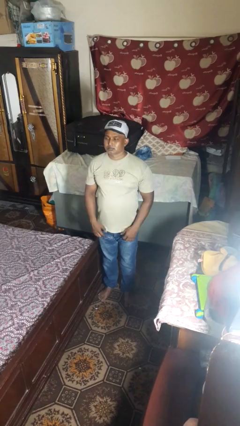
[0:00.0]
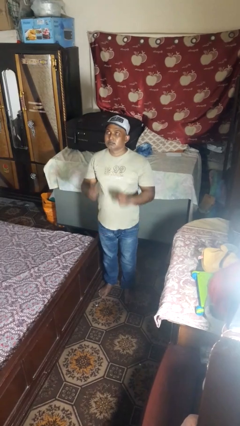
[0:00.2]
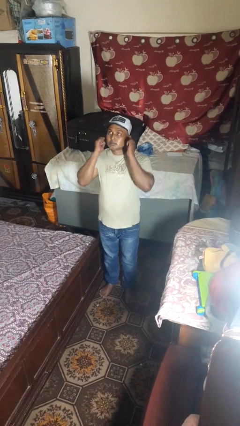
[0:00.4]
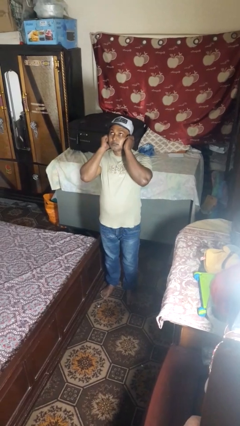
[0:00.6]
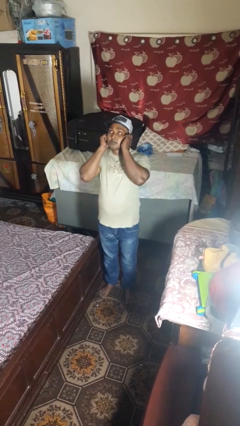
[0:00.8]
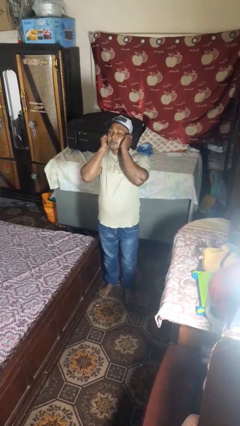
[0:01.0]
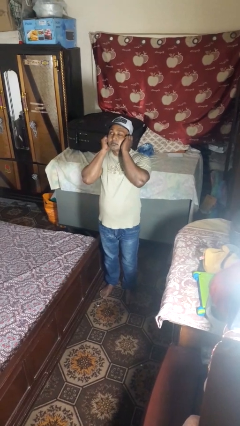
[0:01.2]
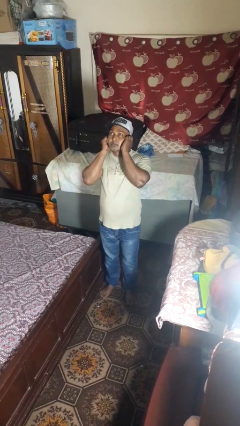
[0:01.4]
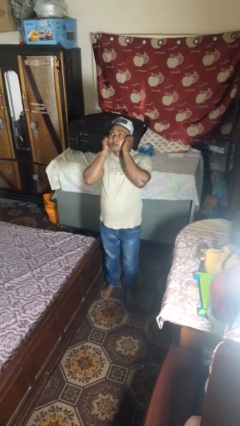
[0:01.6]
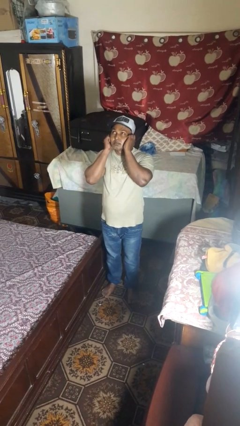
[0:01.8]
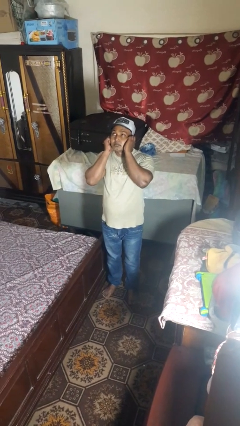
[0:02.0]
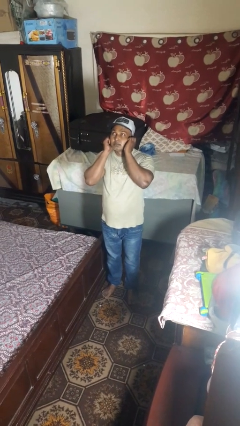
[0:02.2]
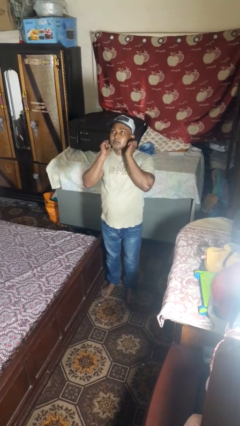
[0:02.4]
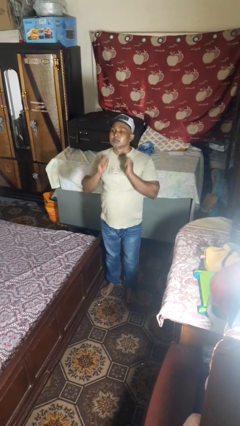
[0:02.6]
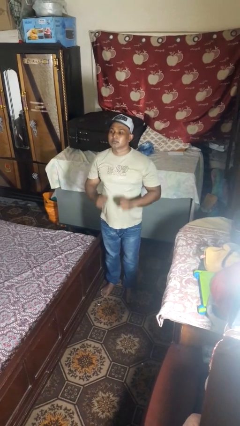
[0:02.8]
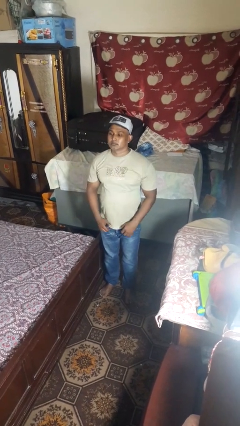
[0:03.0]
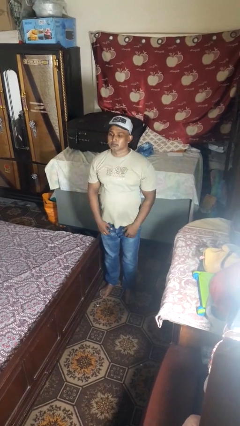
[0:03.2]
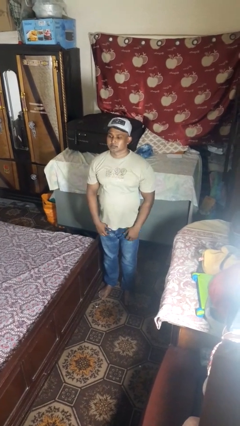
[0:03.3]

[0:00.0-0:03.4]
person puts fingers in ear

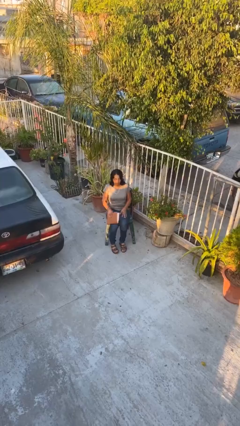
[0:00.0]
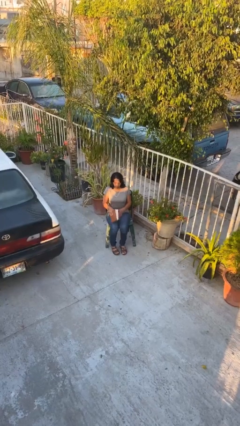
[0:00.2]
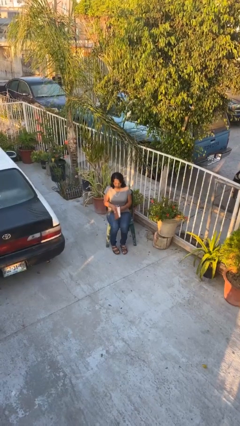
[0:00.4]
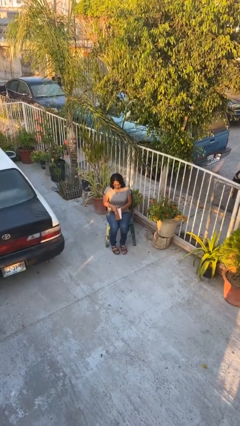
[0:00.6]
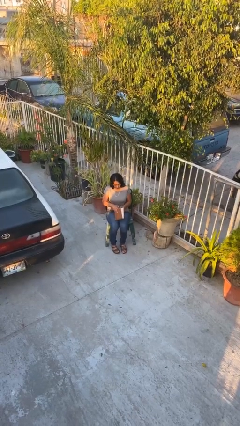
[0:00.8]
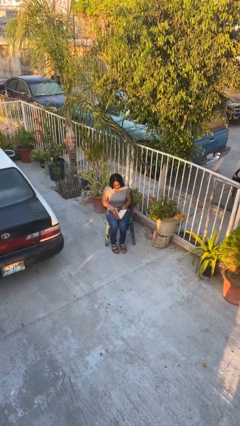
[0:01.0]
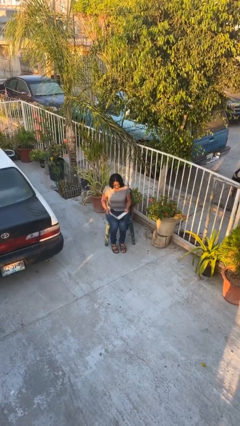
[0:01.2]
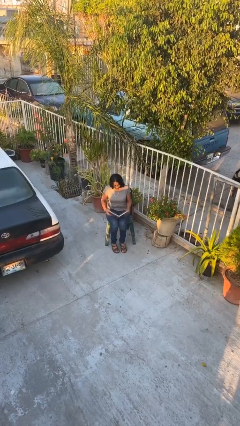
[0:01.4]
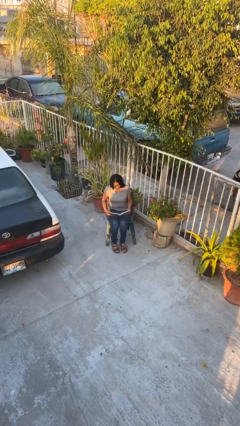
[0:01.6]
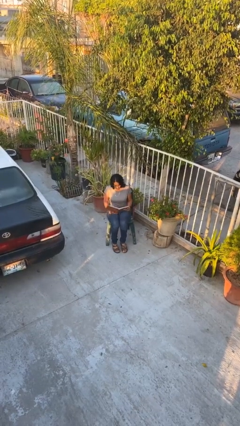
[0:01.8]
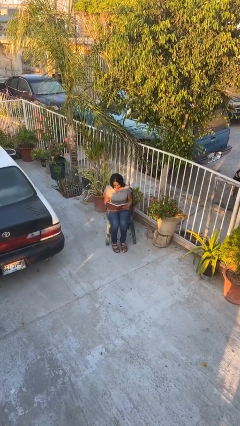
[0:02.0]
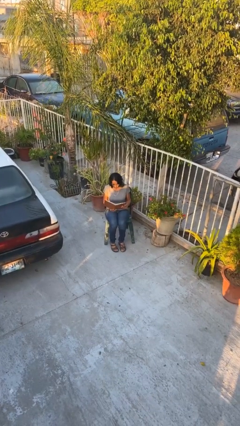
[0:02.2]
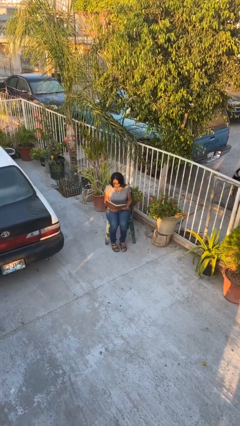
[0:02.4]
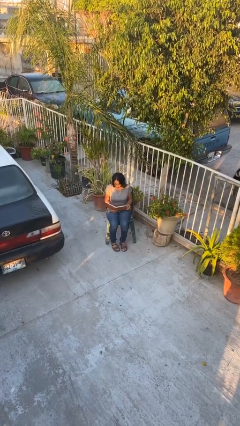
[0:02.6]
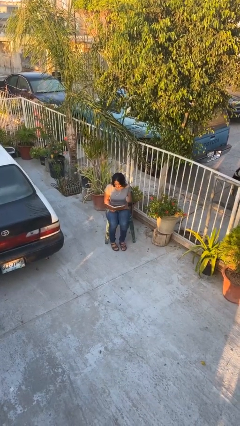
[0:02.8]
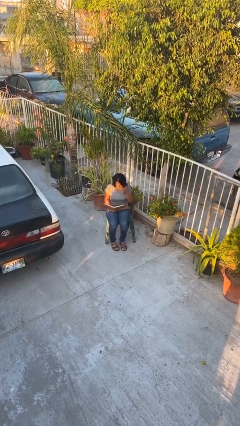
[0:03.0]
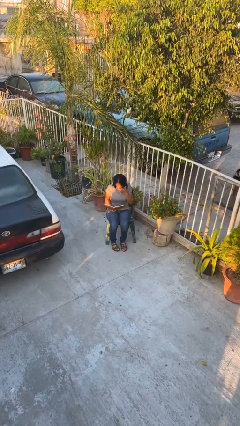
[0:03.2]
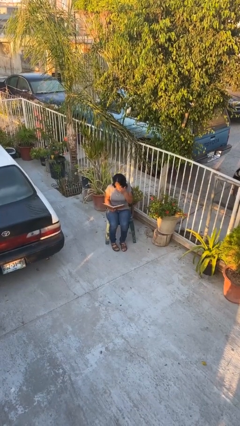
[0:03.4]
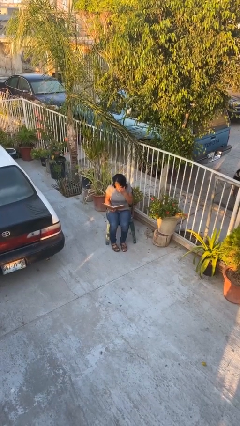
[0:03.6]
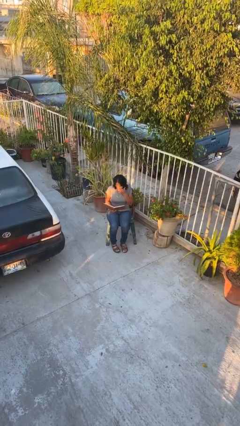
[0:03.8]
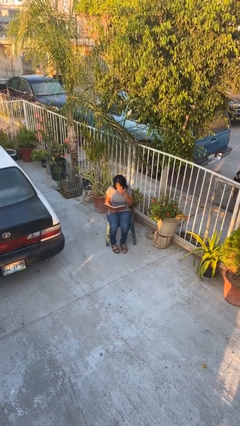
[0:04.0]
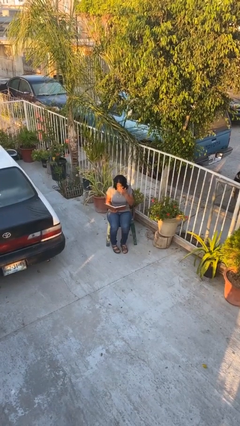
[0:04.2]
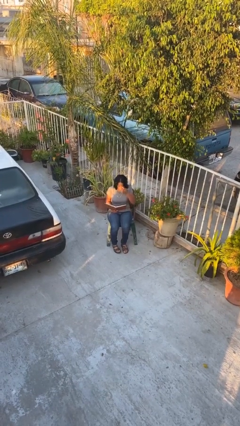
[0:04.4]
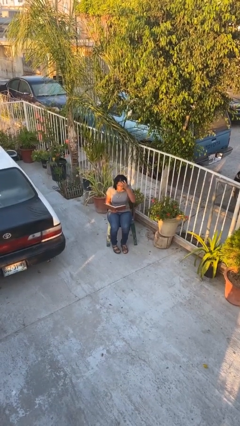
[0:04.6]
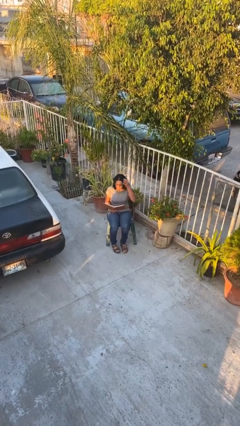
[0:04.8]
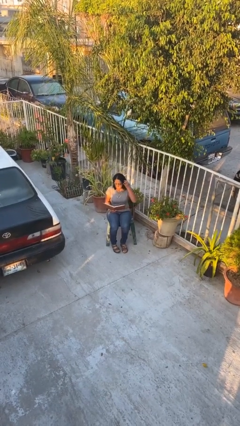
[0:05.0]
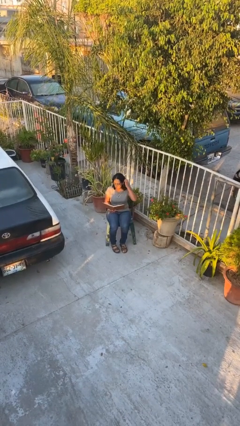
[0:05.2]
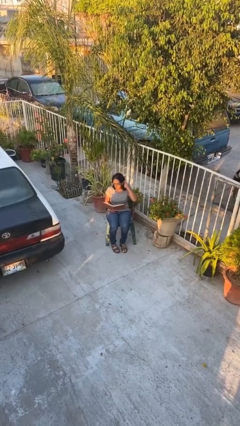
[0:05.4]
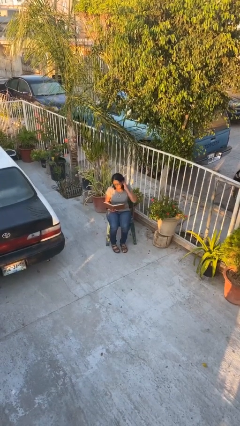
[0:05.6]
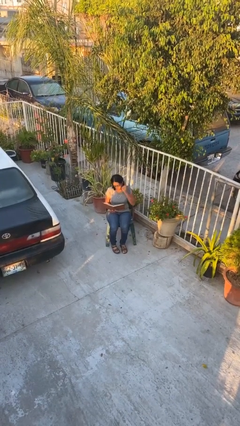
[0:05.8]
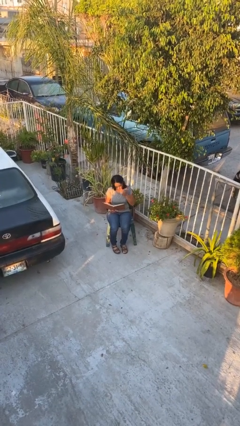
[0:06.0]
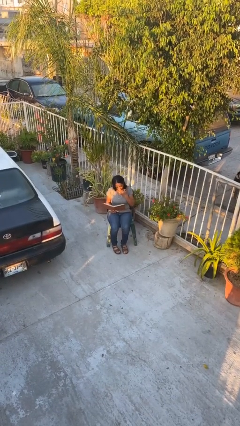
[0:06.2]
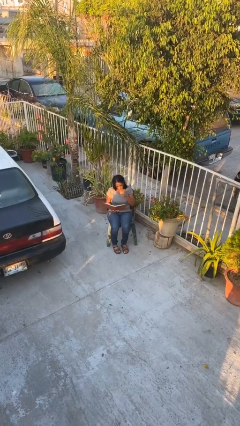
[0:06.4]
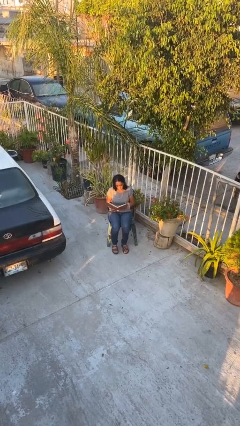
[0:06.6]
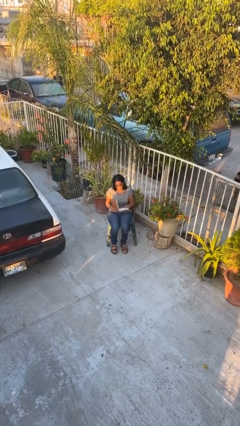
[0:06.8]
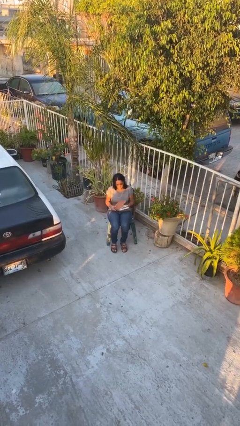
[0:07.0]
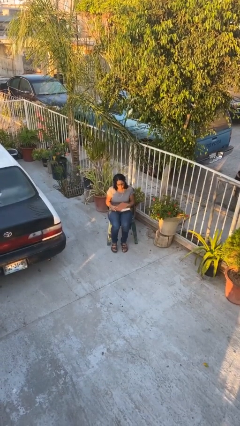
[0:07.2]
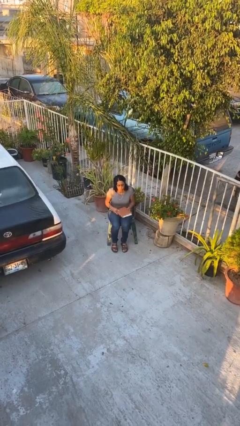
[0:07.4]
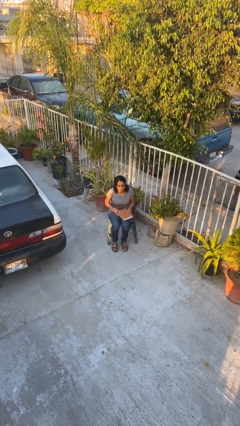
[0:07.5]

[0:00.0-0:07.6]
person reads document

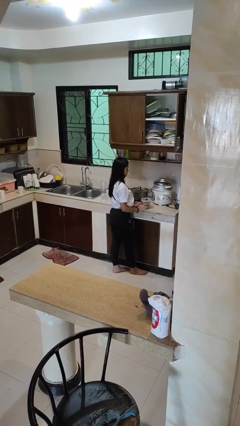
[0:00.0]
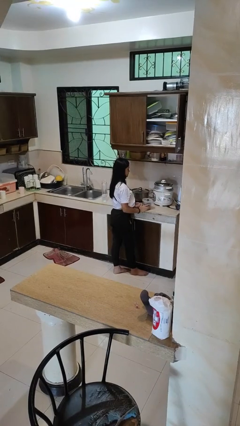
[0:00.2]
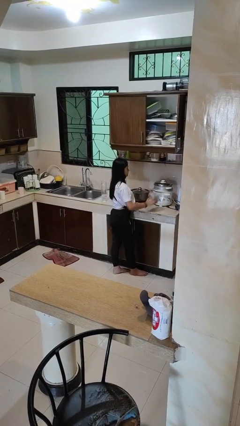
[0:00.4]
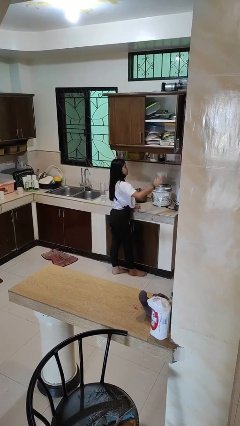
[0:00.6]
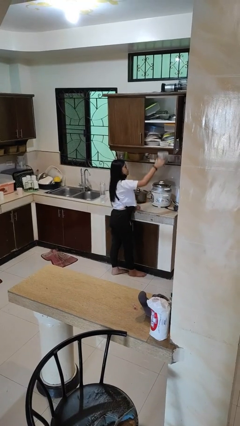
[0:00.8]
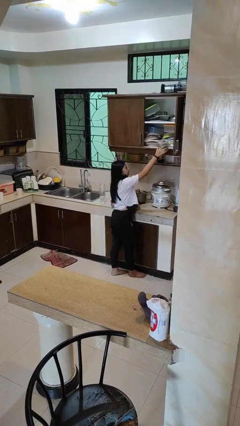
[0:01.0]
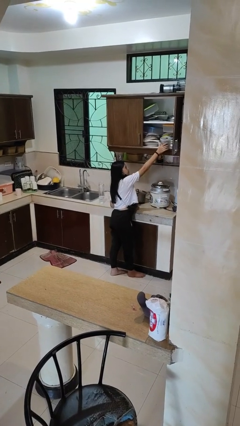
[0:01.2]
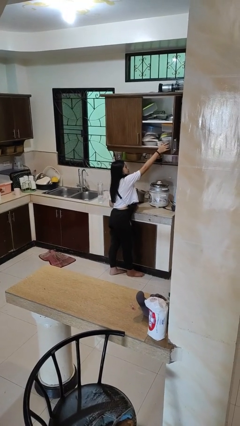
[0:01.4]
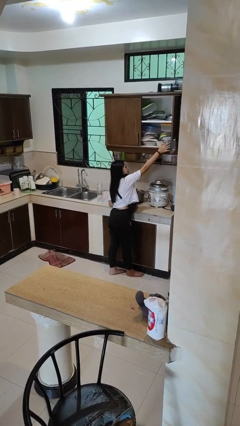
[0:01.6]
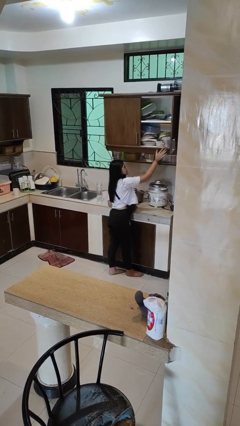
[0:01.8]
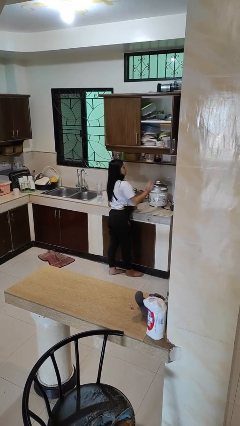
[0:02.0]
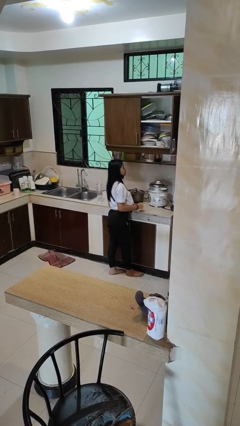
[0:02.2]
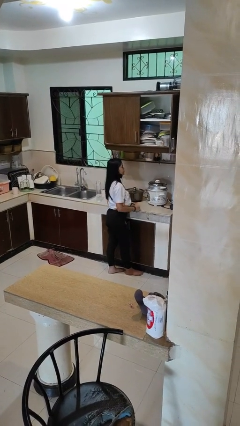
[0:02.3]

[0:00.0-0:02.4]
person puts down object on shelf

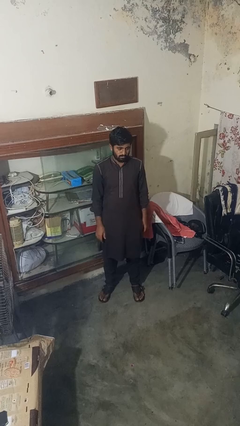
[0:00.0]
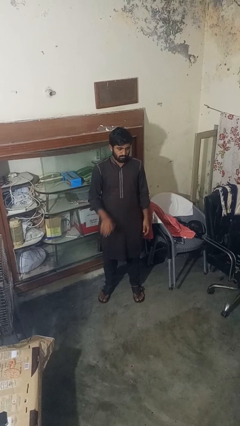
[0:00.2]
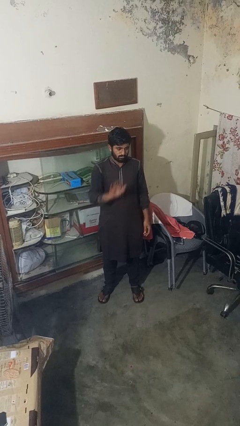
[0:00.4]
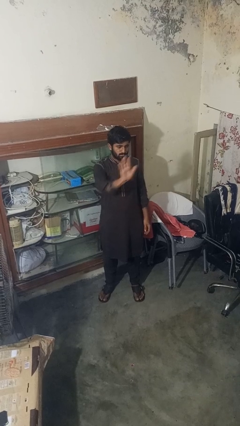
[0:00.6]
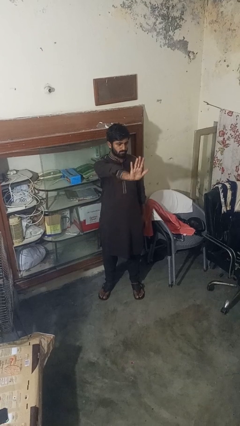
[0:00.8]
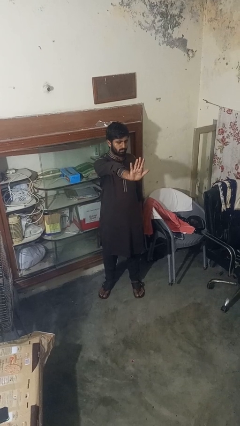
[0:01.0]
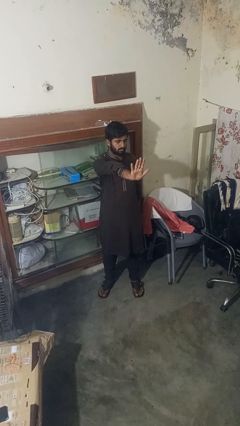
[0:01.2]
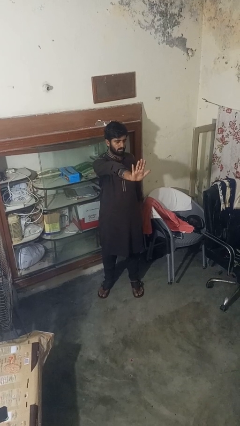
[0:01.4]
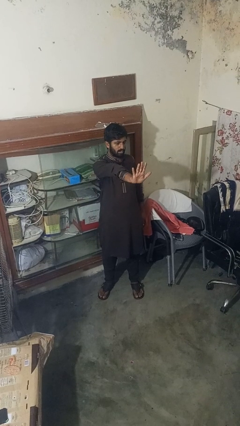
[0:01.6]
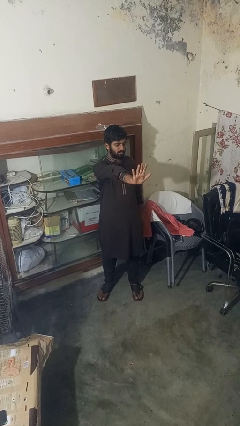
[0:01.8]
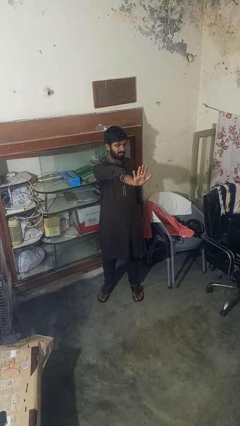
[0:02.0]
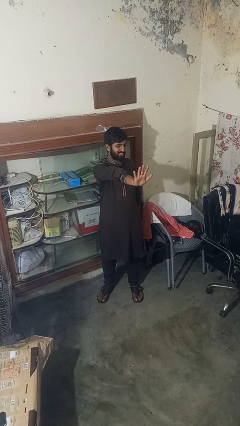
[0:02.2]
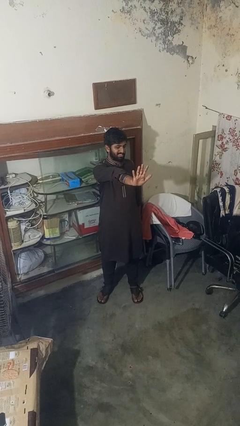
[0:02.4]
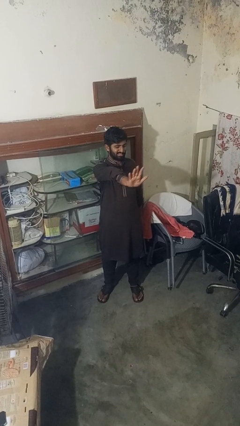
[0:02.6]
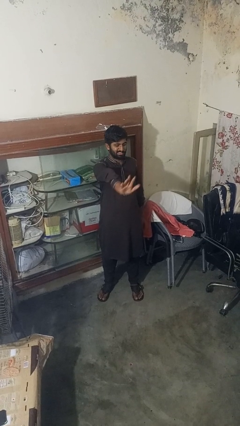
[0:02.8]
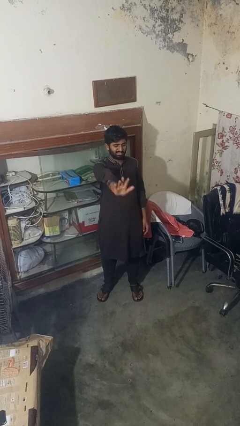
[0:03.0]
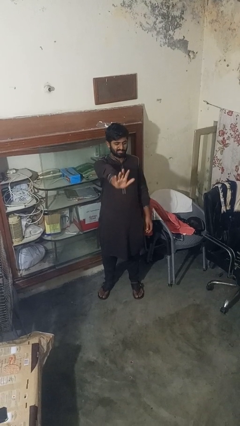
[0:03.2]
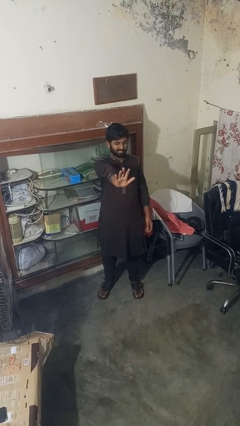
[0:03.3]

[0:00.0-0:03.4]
person gestures number five

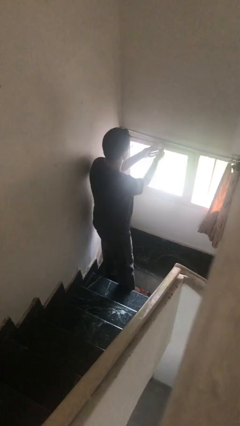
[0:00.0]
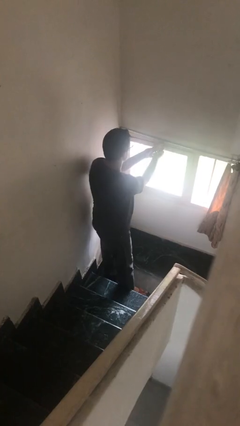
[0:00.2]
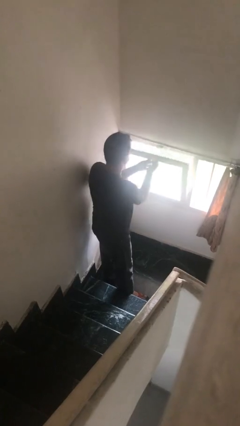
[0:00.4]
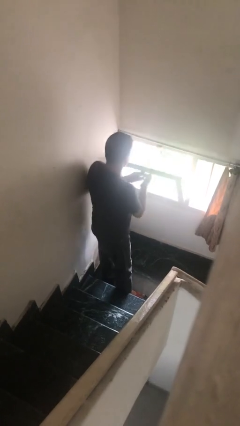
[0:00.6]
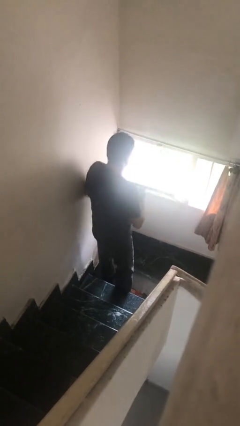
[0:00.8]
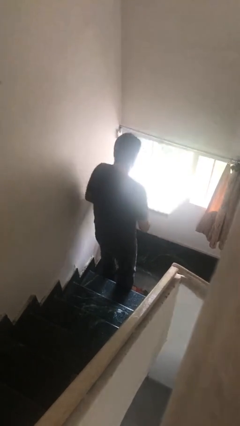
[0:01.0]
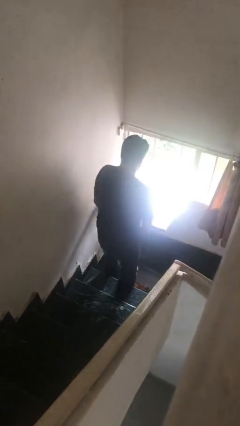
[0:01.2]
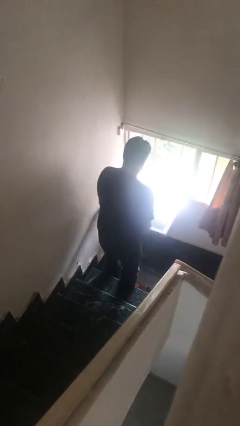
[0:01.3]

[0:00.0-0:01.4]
person opens home window
